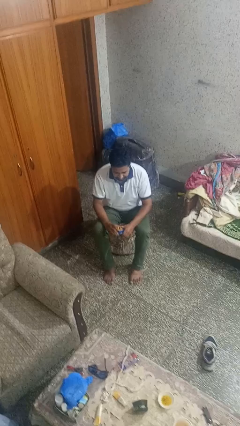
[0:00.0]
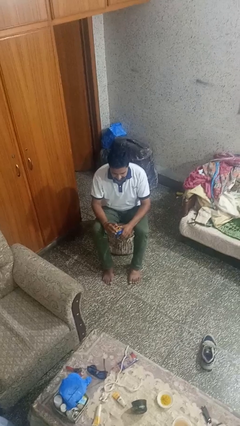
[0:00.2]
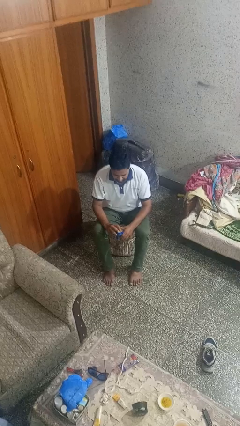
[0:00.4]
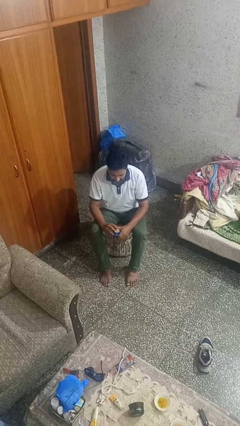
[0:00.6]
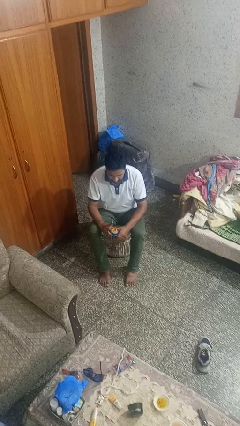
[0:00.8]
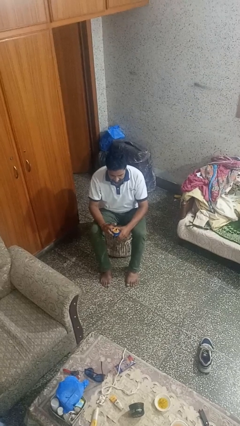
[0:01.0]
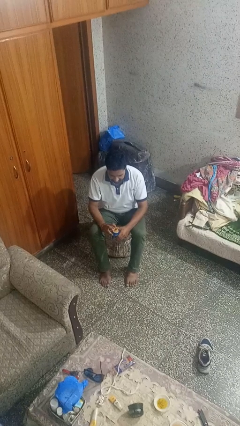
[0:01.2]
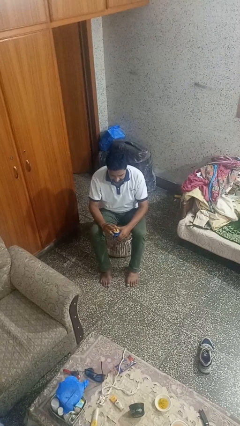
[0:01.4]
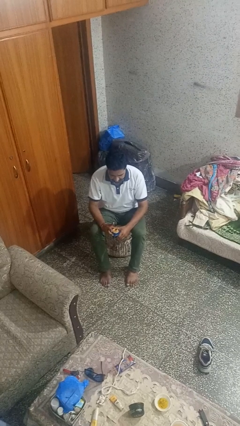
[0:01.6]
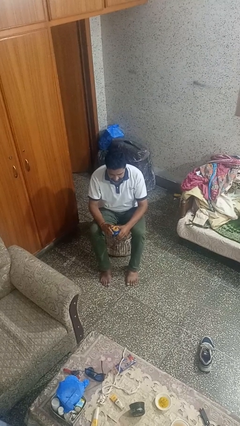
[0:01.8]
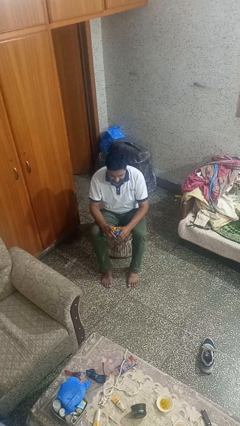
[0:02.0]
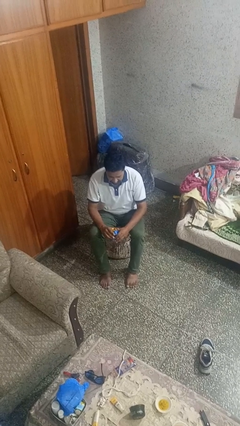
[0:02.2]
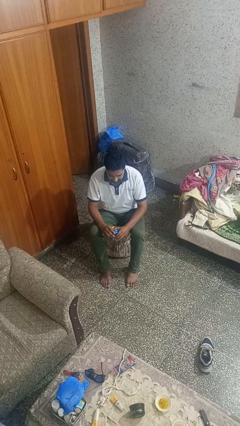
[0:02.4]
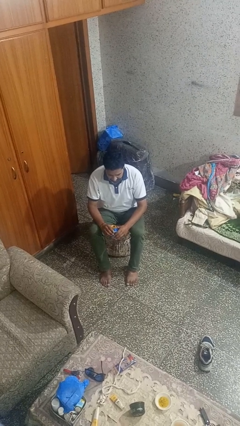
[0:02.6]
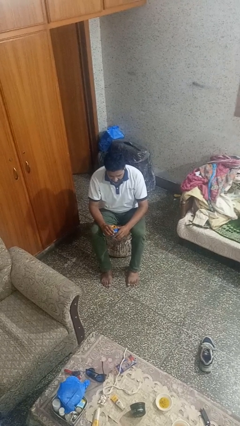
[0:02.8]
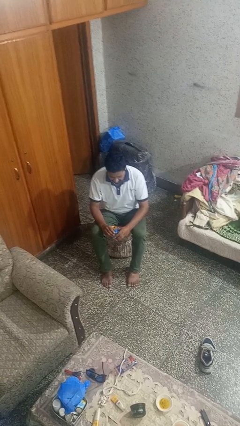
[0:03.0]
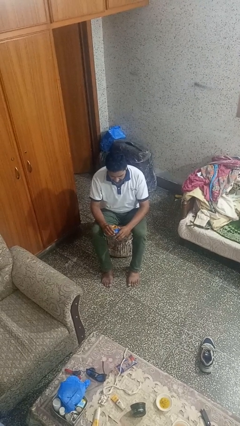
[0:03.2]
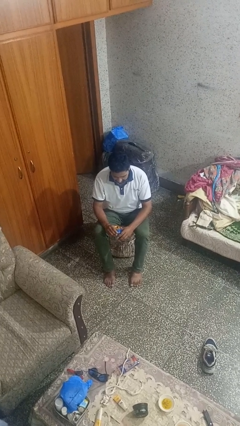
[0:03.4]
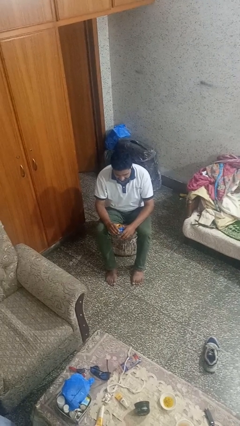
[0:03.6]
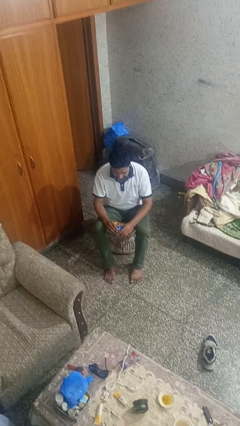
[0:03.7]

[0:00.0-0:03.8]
person opens beverage can

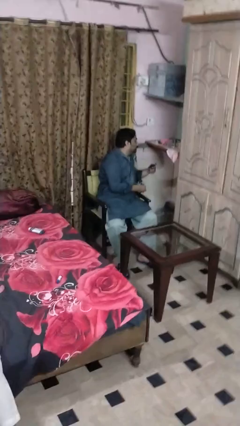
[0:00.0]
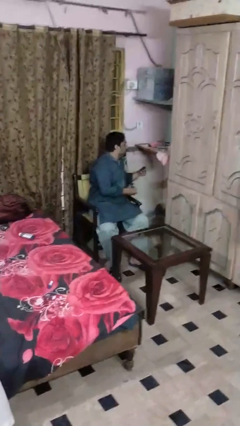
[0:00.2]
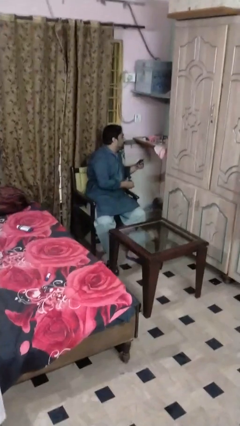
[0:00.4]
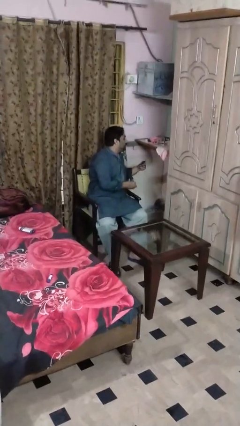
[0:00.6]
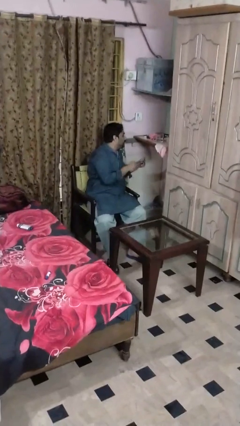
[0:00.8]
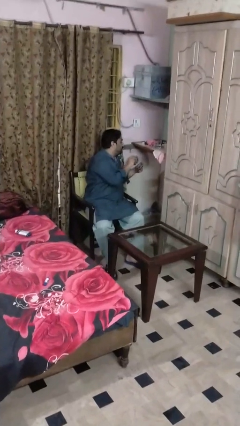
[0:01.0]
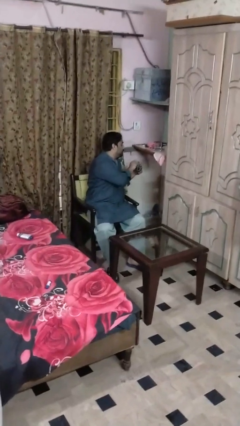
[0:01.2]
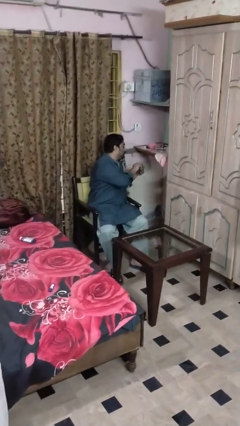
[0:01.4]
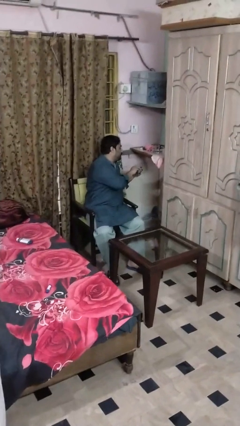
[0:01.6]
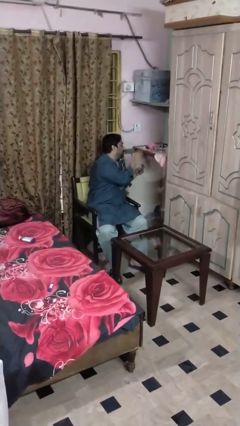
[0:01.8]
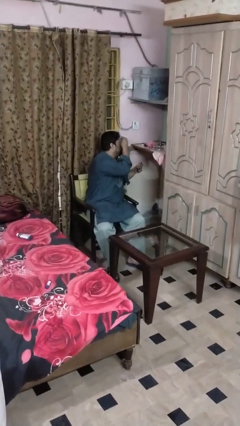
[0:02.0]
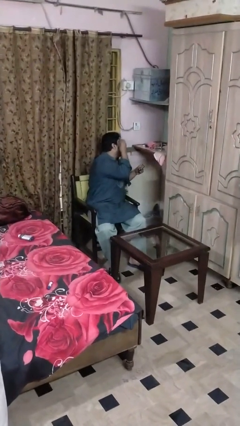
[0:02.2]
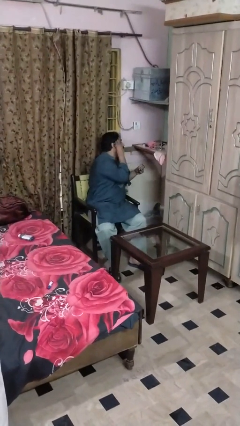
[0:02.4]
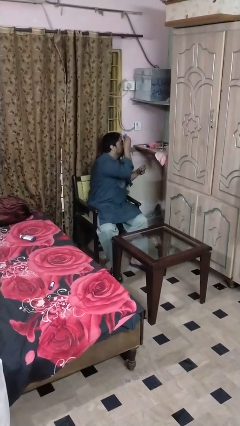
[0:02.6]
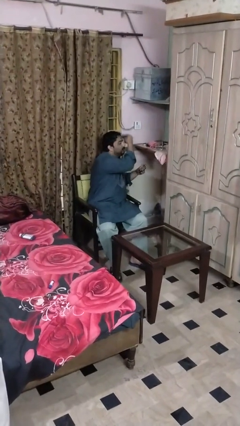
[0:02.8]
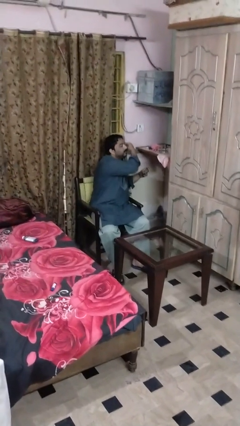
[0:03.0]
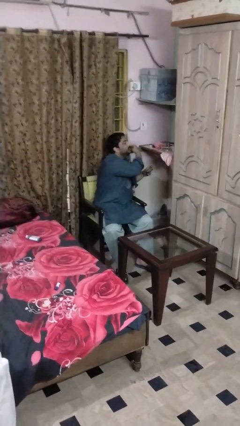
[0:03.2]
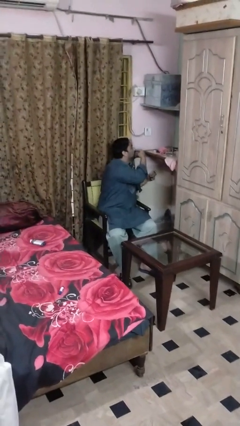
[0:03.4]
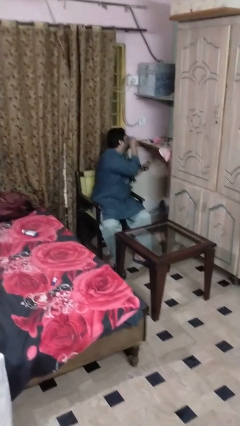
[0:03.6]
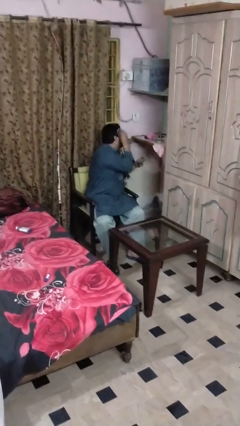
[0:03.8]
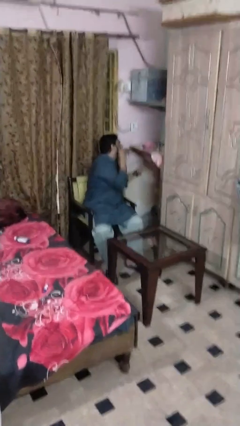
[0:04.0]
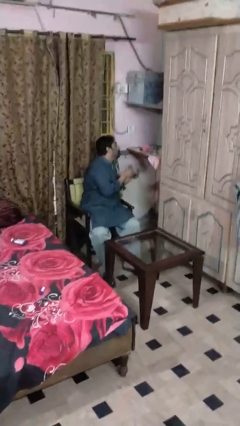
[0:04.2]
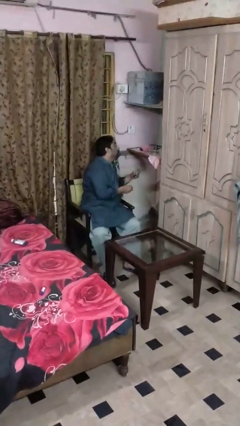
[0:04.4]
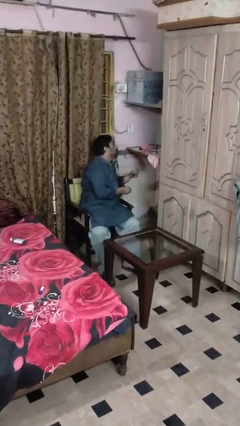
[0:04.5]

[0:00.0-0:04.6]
person applies foundation makeup

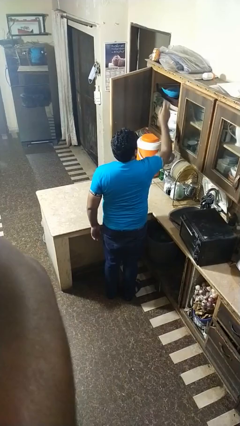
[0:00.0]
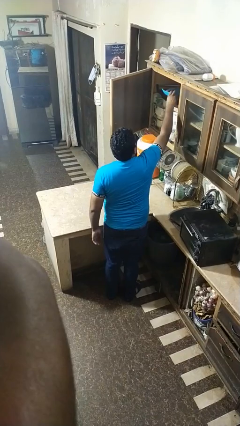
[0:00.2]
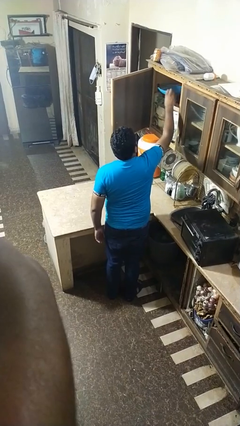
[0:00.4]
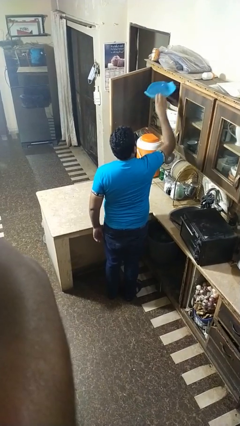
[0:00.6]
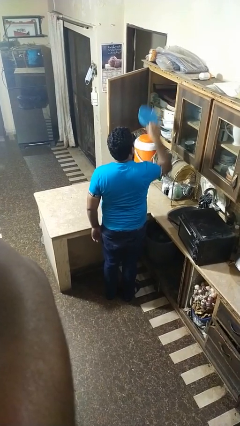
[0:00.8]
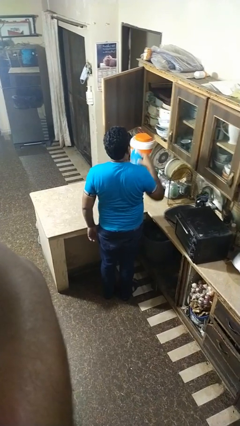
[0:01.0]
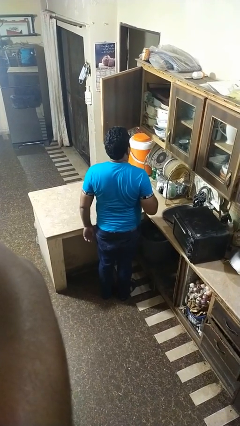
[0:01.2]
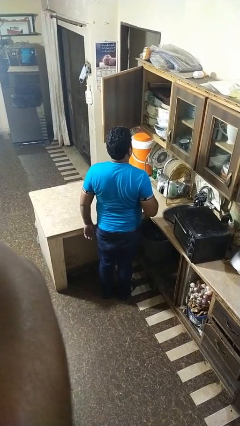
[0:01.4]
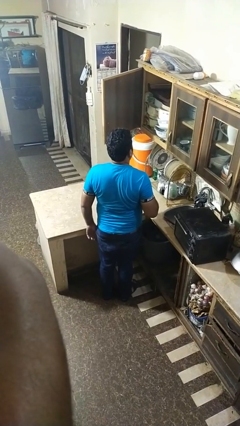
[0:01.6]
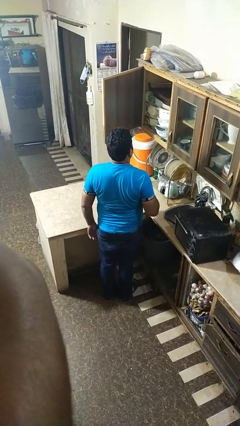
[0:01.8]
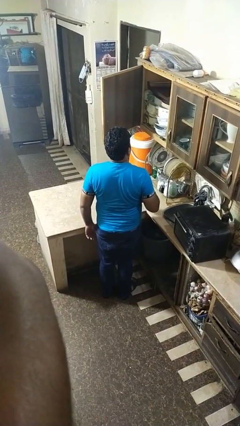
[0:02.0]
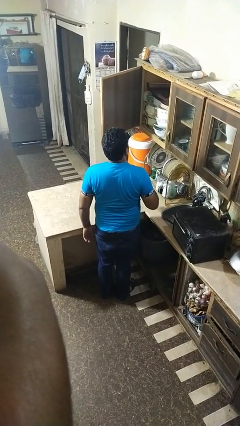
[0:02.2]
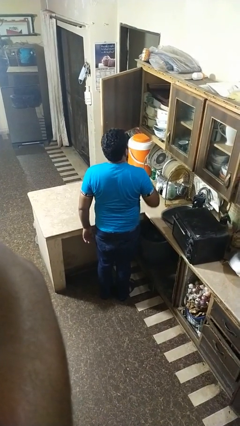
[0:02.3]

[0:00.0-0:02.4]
person puts object in cabinet

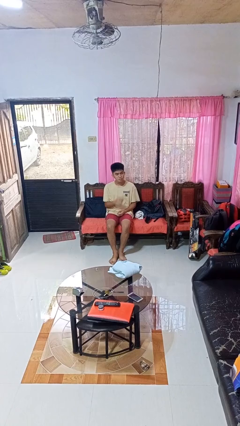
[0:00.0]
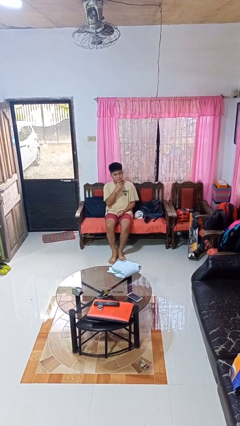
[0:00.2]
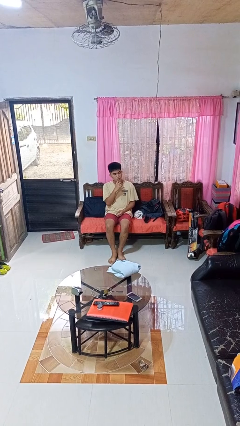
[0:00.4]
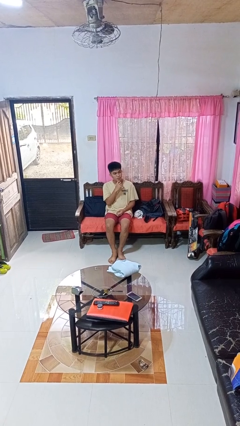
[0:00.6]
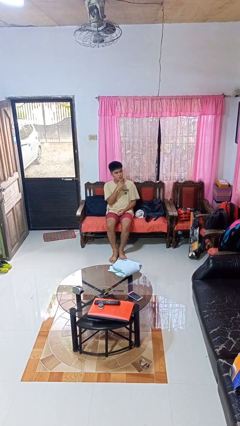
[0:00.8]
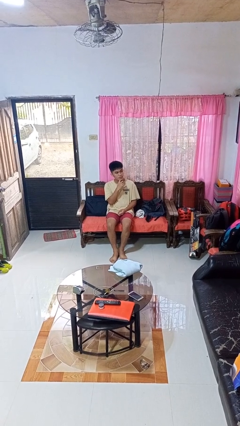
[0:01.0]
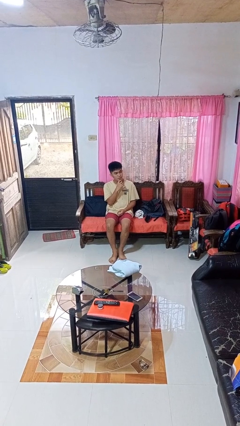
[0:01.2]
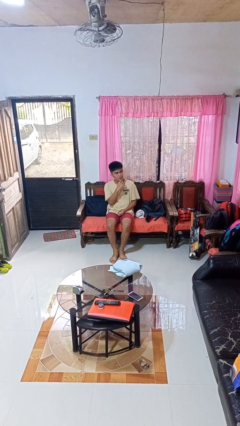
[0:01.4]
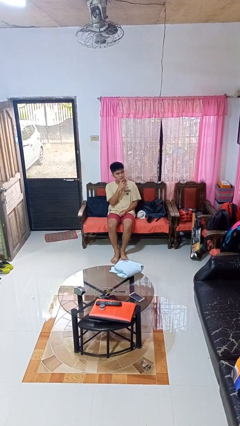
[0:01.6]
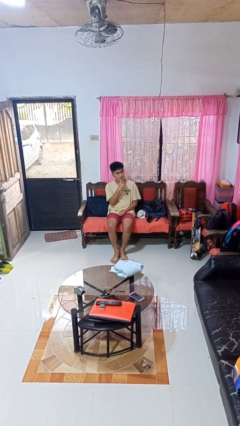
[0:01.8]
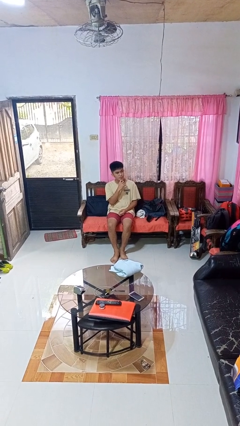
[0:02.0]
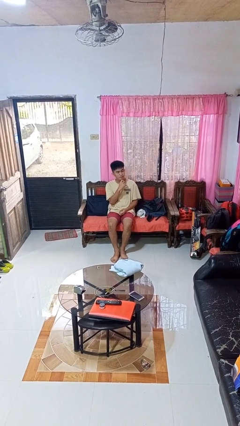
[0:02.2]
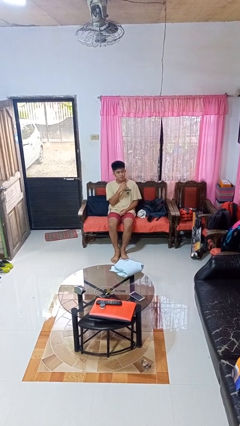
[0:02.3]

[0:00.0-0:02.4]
person strokes chin

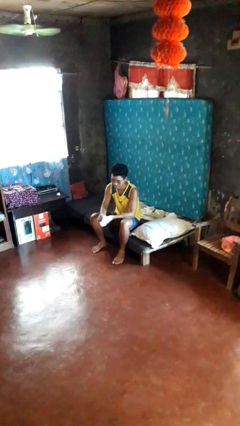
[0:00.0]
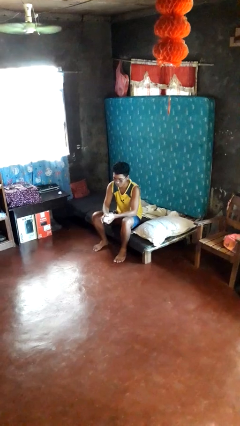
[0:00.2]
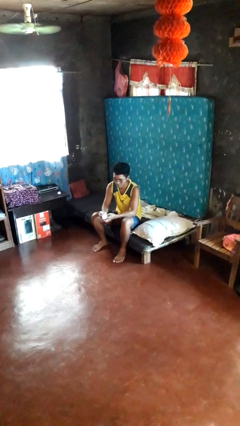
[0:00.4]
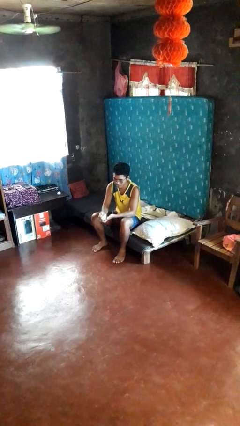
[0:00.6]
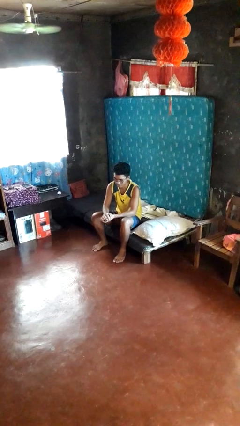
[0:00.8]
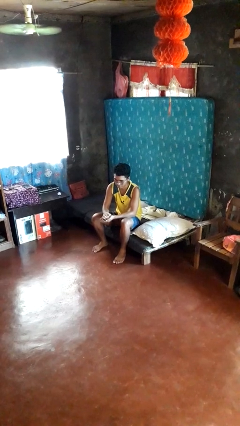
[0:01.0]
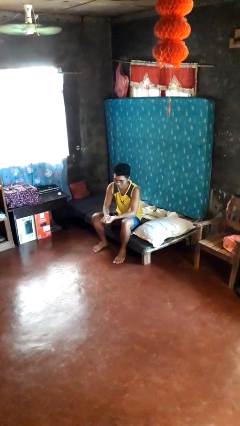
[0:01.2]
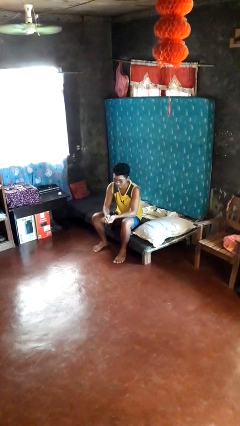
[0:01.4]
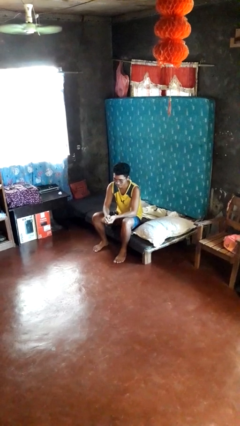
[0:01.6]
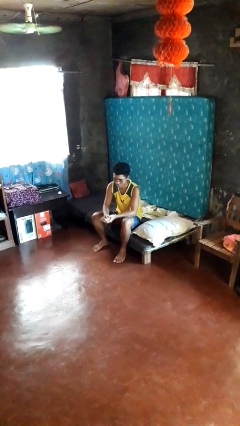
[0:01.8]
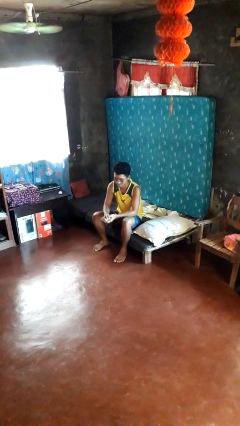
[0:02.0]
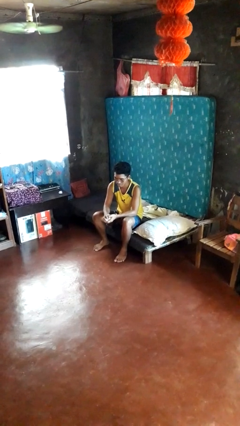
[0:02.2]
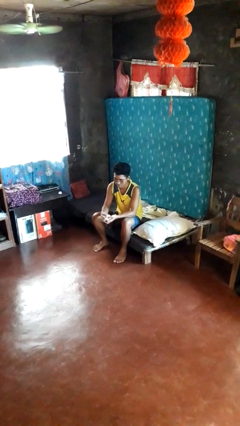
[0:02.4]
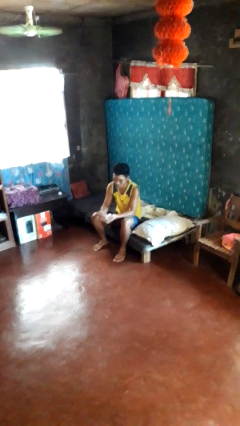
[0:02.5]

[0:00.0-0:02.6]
person crumples paper

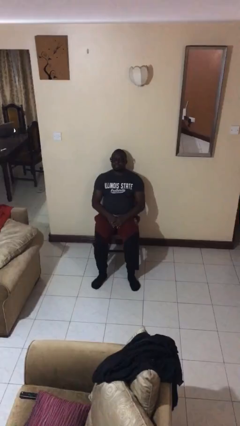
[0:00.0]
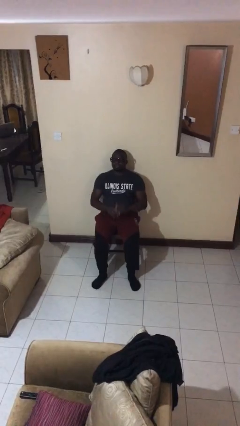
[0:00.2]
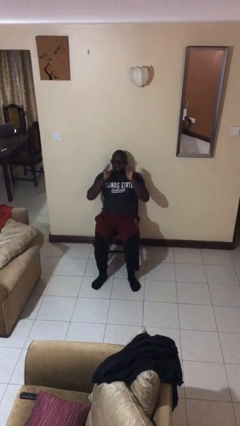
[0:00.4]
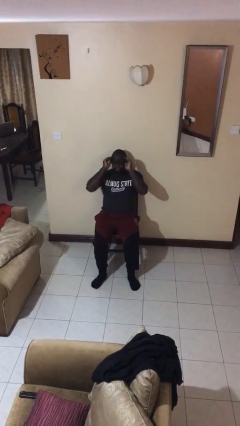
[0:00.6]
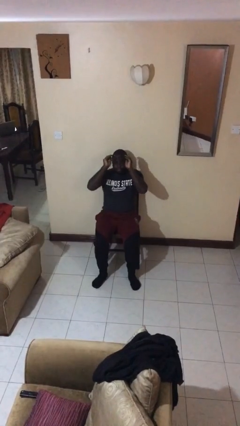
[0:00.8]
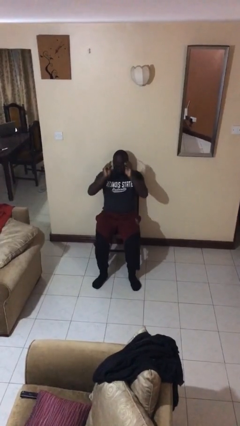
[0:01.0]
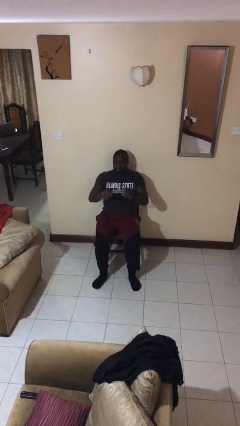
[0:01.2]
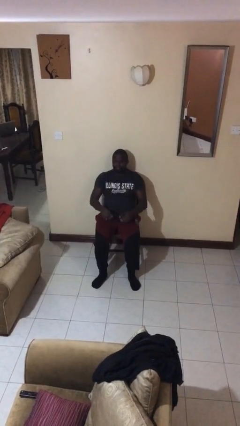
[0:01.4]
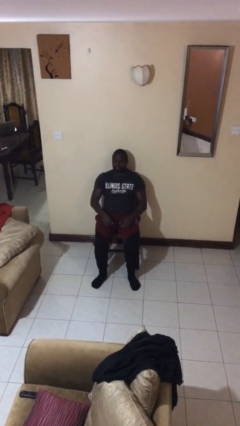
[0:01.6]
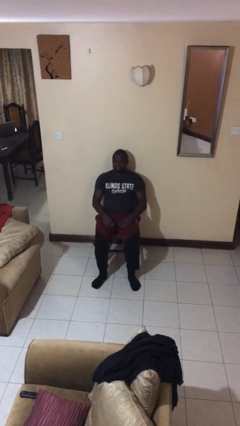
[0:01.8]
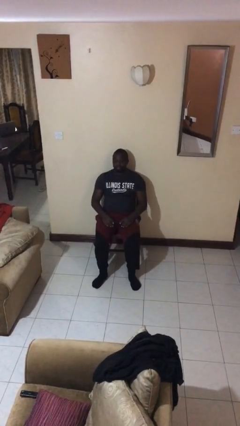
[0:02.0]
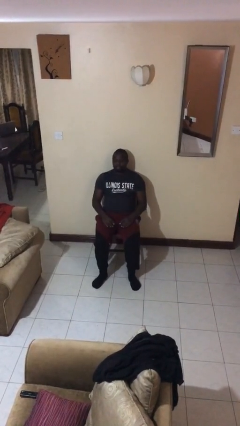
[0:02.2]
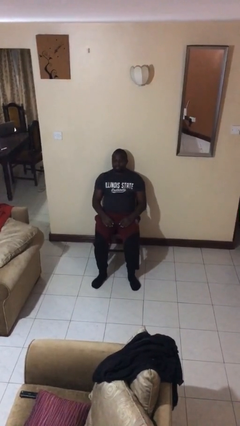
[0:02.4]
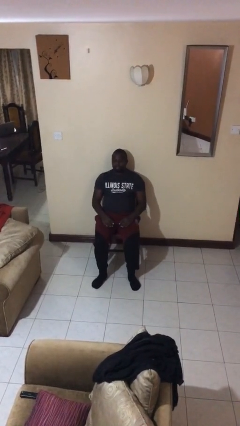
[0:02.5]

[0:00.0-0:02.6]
person takes off glasses
